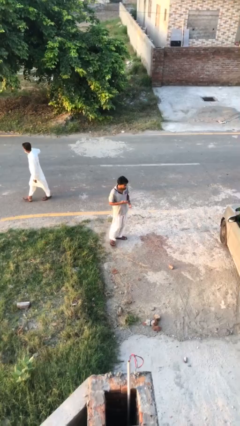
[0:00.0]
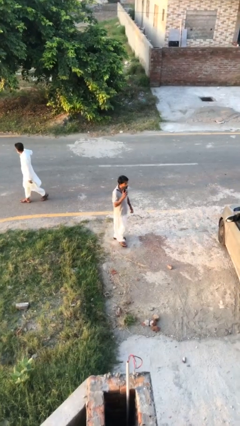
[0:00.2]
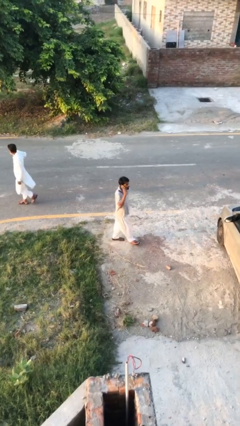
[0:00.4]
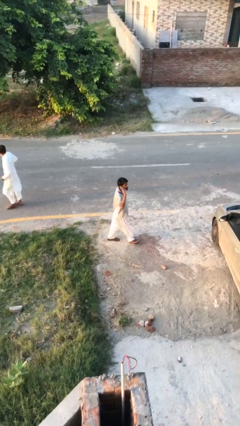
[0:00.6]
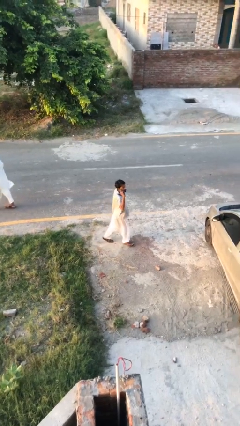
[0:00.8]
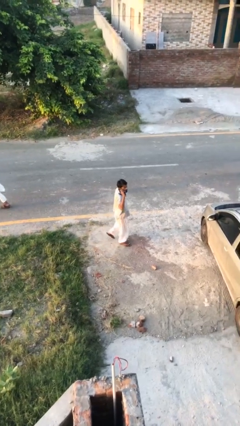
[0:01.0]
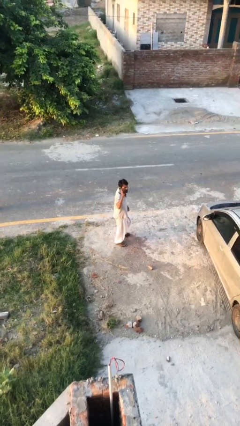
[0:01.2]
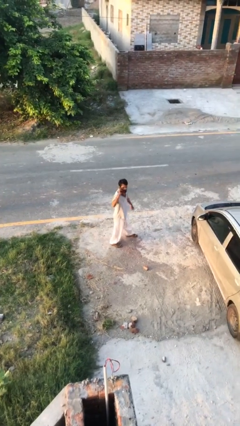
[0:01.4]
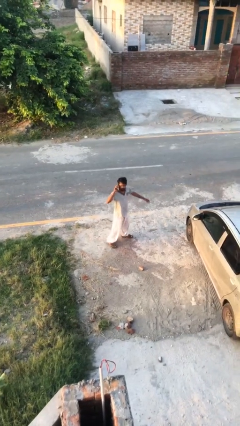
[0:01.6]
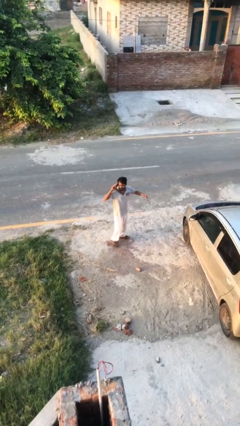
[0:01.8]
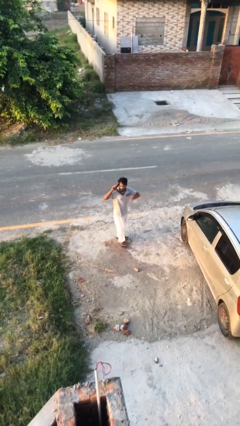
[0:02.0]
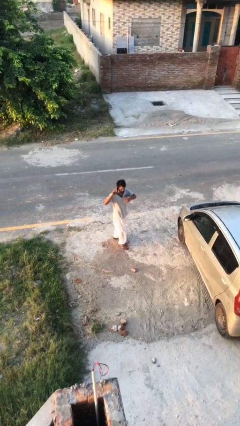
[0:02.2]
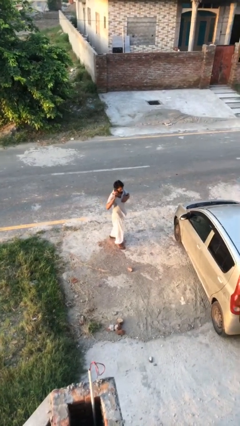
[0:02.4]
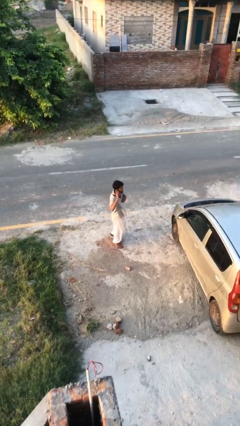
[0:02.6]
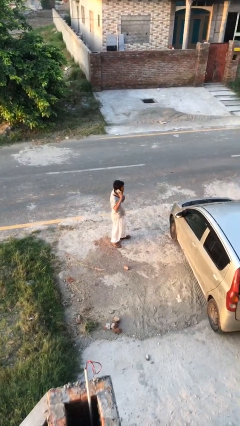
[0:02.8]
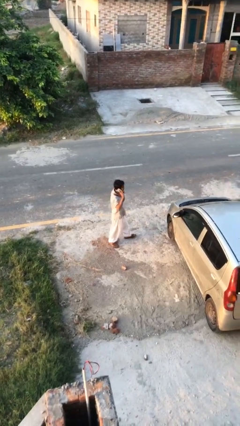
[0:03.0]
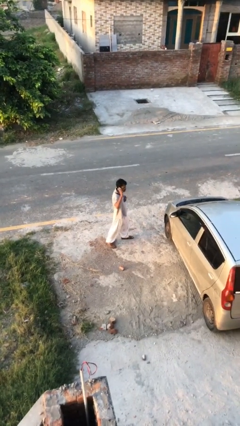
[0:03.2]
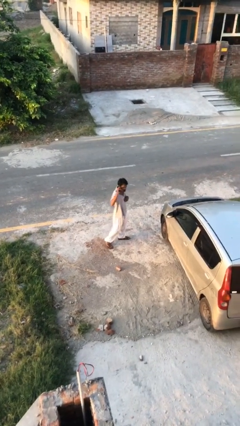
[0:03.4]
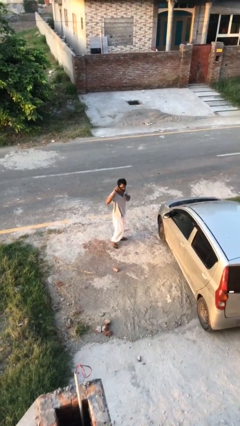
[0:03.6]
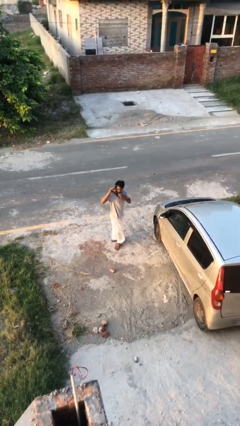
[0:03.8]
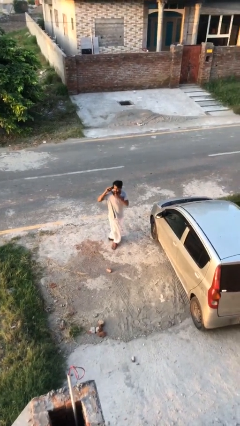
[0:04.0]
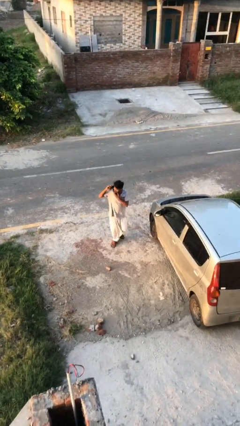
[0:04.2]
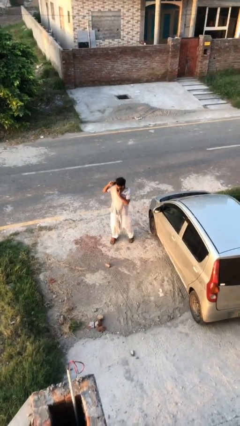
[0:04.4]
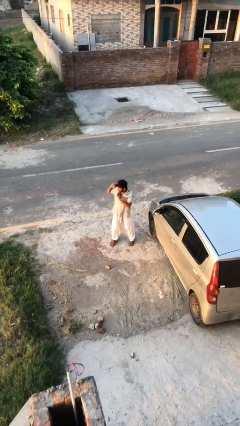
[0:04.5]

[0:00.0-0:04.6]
person talks on phone

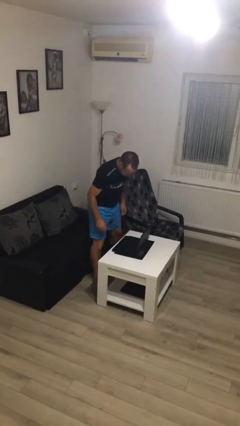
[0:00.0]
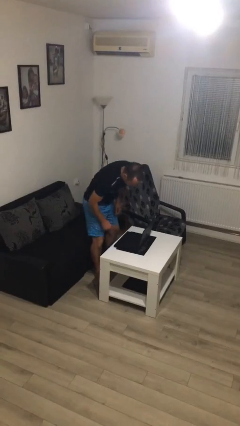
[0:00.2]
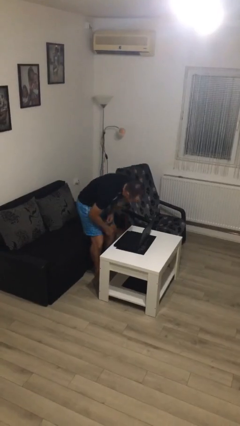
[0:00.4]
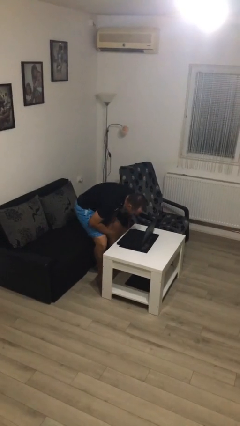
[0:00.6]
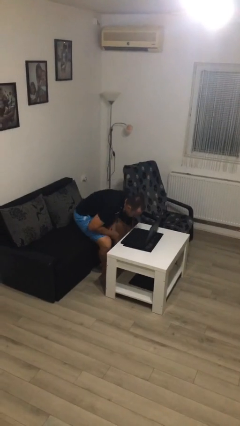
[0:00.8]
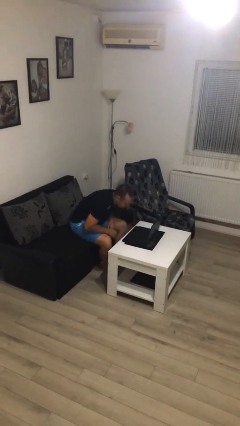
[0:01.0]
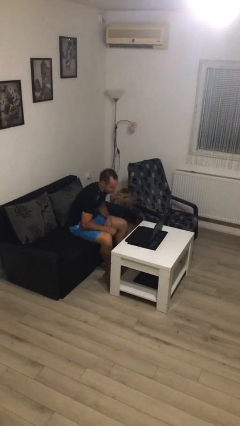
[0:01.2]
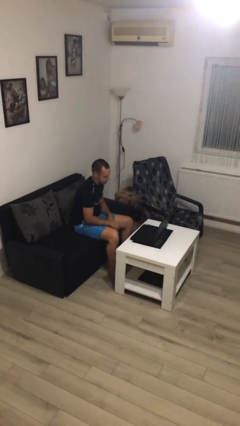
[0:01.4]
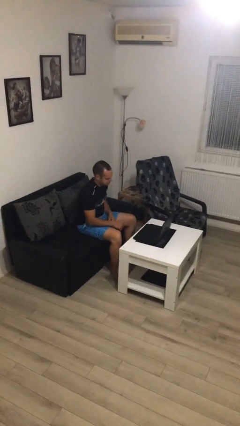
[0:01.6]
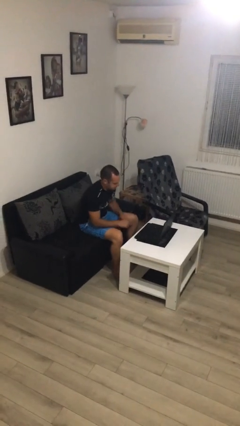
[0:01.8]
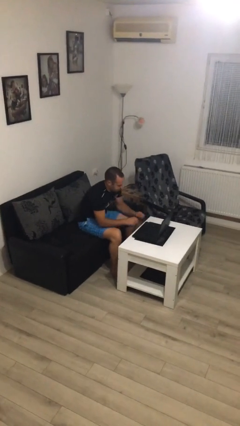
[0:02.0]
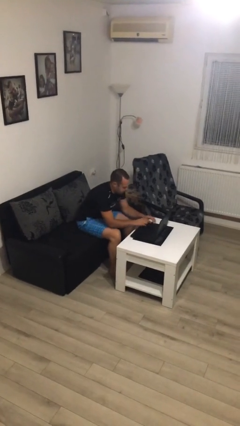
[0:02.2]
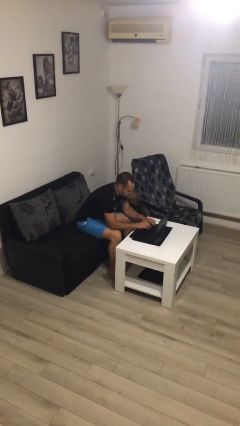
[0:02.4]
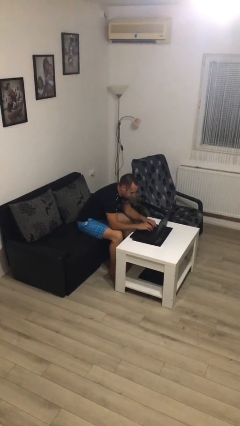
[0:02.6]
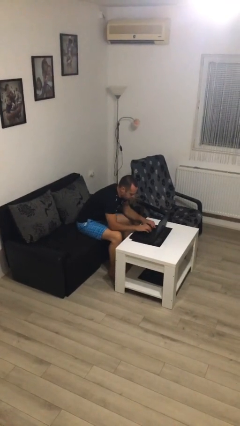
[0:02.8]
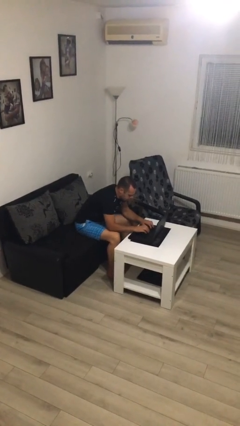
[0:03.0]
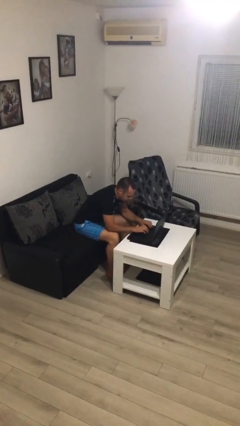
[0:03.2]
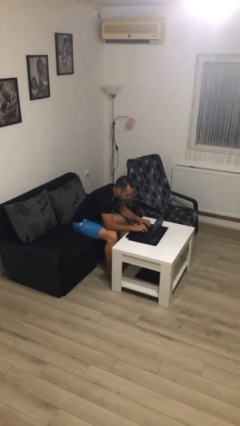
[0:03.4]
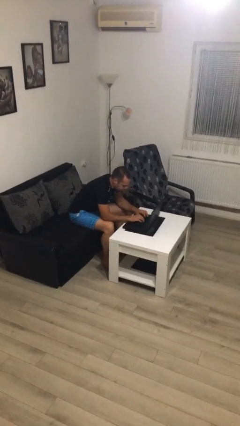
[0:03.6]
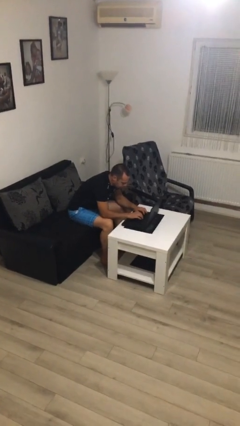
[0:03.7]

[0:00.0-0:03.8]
person sits down

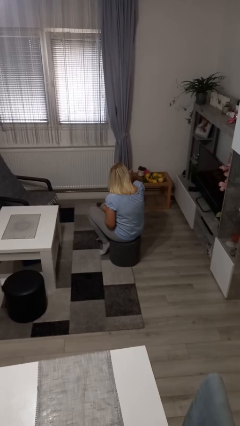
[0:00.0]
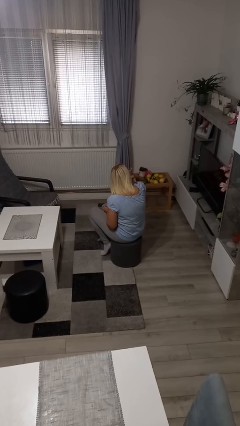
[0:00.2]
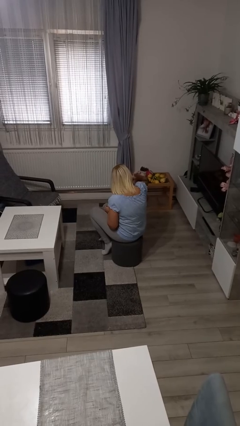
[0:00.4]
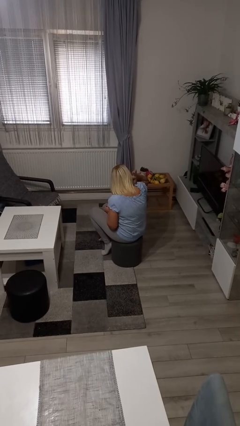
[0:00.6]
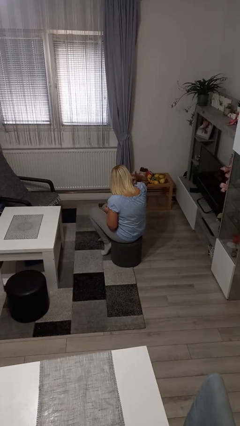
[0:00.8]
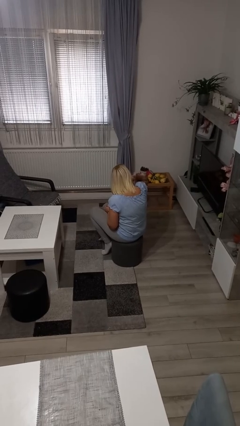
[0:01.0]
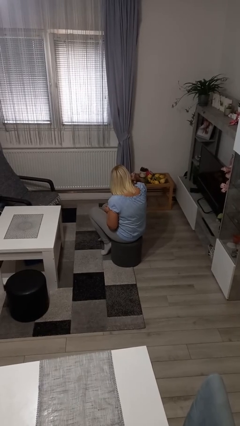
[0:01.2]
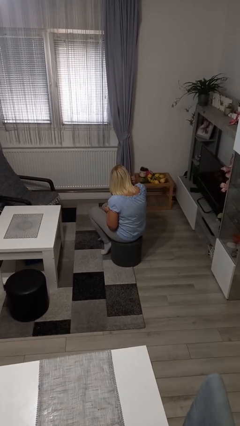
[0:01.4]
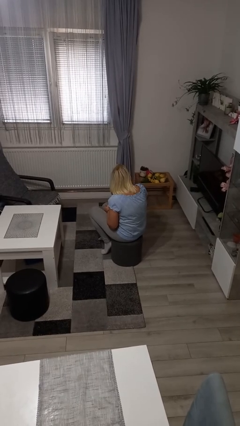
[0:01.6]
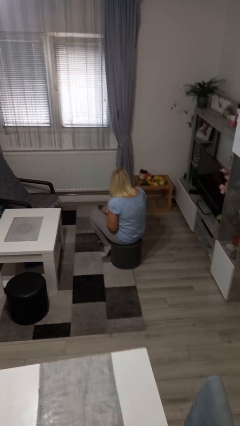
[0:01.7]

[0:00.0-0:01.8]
person touches earlobe

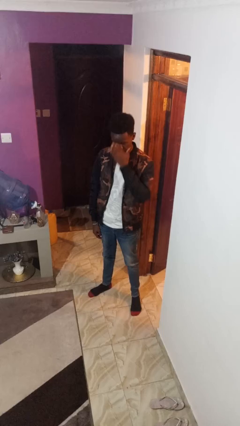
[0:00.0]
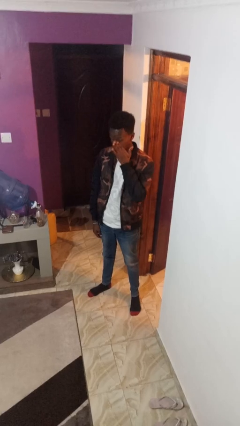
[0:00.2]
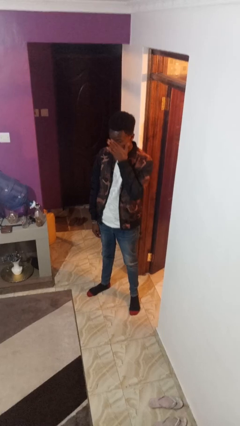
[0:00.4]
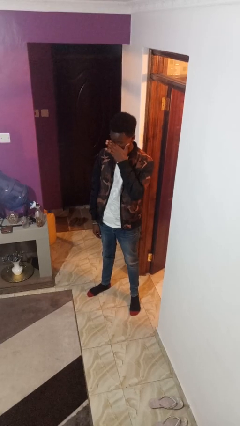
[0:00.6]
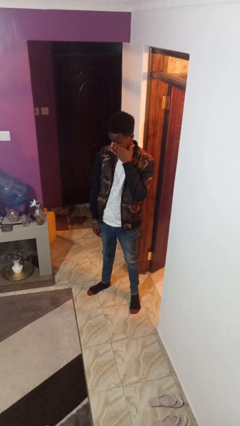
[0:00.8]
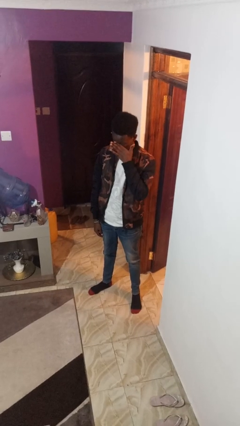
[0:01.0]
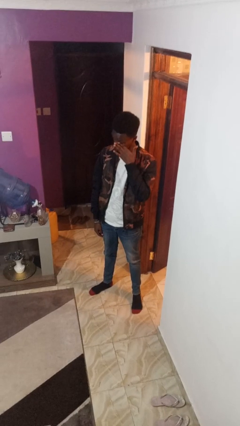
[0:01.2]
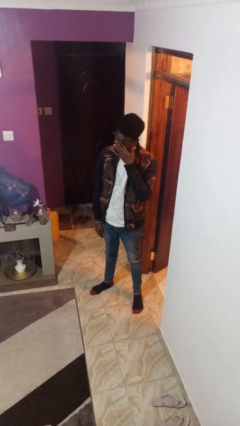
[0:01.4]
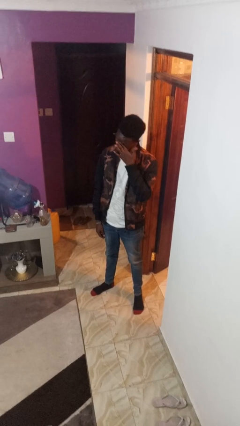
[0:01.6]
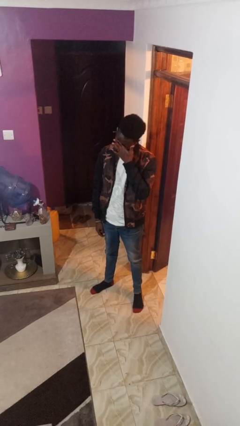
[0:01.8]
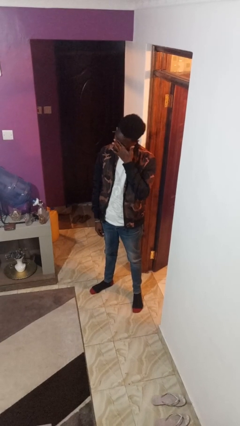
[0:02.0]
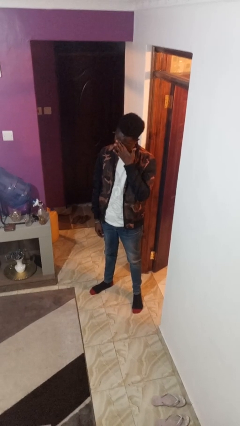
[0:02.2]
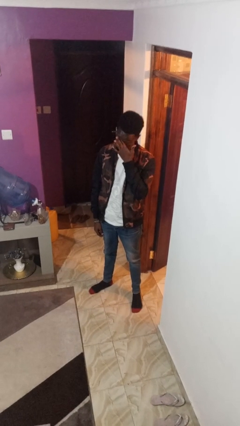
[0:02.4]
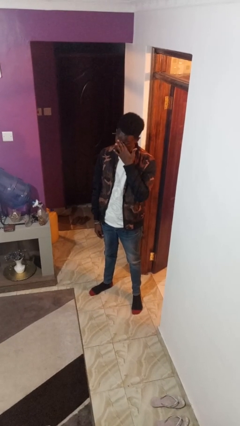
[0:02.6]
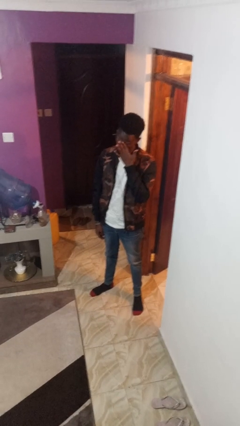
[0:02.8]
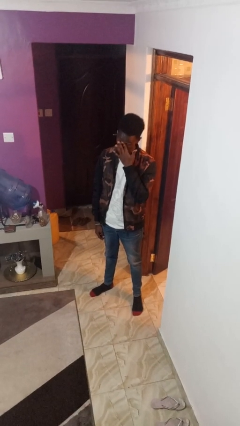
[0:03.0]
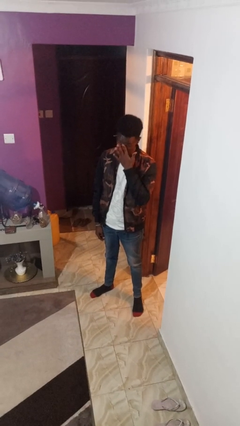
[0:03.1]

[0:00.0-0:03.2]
person scratches face

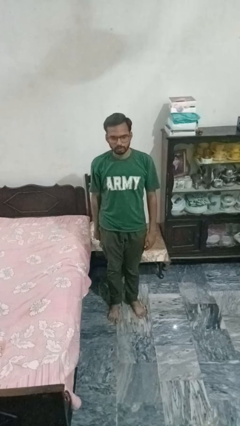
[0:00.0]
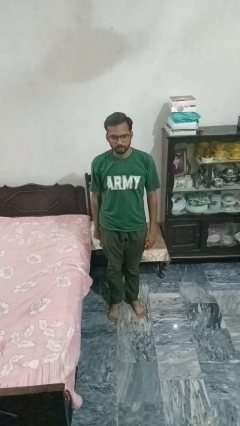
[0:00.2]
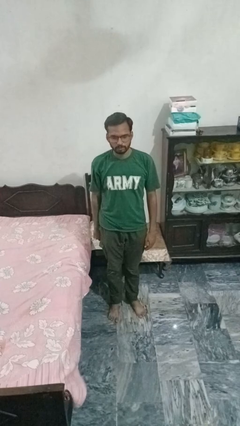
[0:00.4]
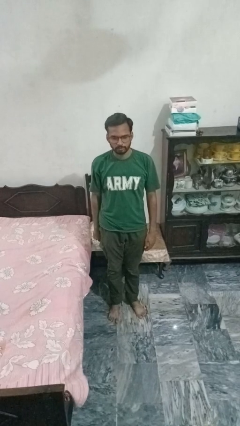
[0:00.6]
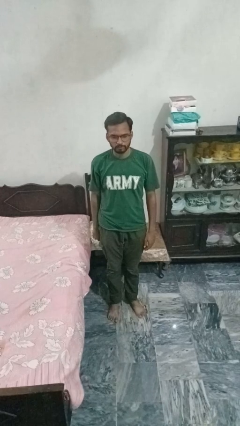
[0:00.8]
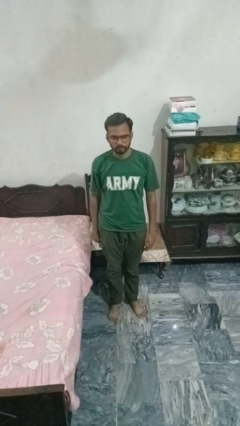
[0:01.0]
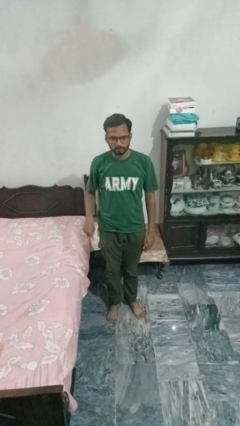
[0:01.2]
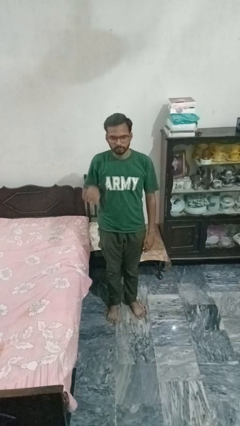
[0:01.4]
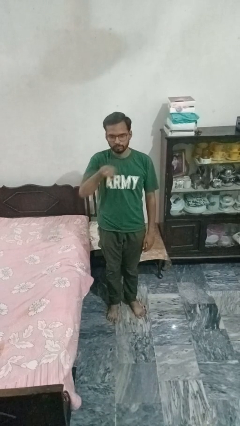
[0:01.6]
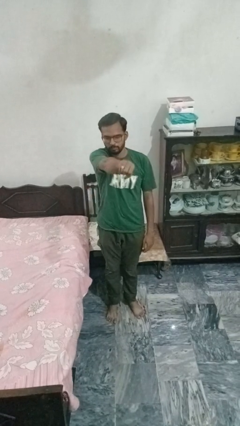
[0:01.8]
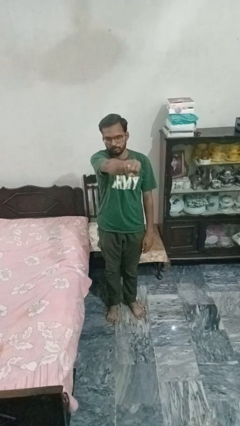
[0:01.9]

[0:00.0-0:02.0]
person punches

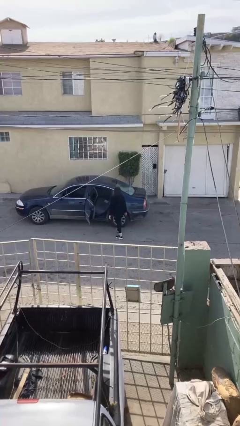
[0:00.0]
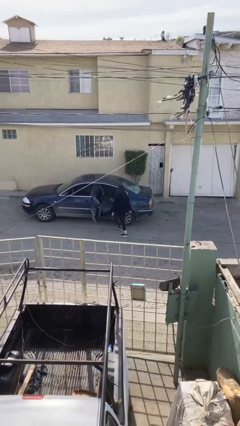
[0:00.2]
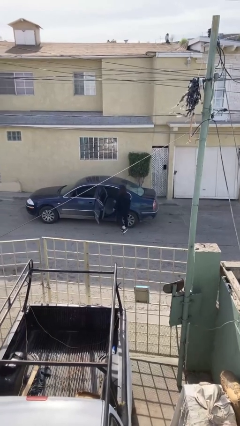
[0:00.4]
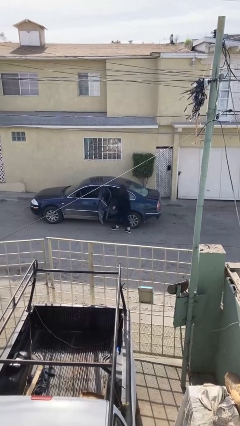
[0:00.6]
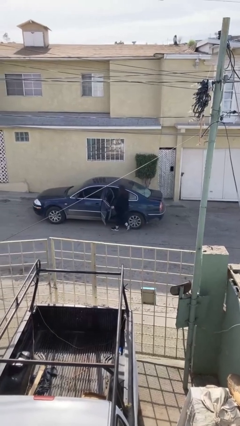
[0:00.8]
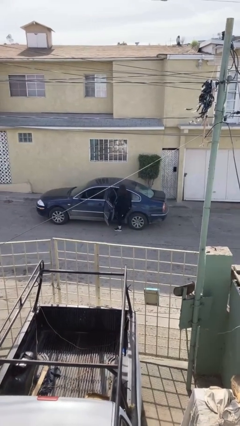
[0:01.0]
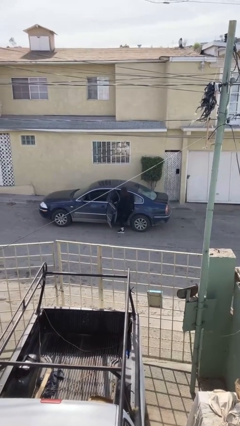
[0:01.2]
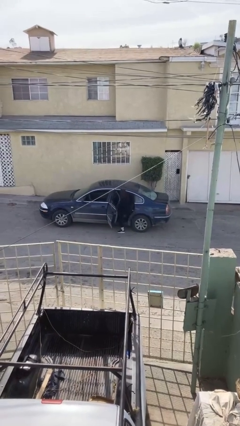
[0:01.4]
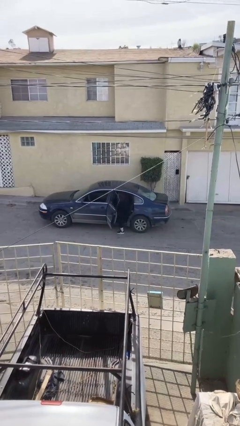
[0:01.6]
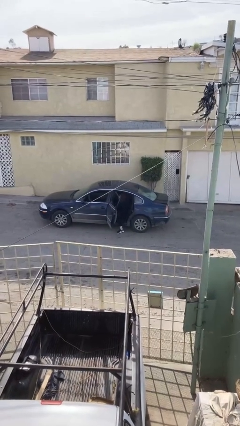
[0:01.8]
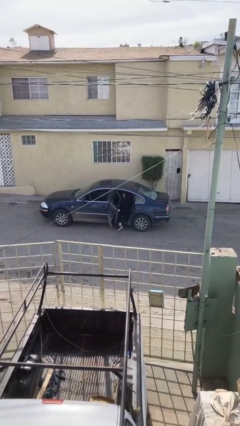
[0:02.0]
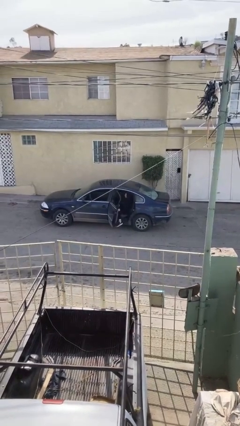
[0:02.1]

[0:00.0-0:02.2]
person enters car
